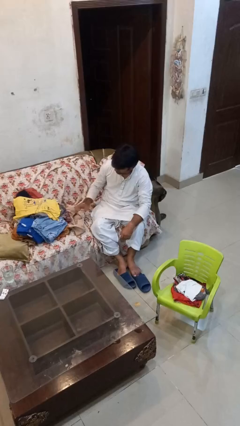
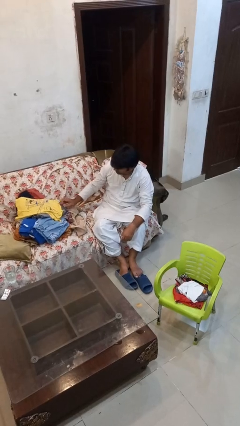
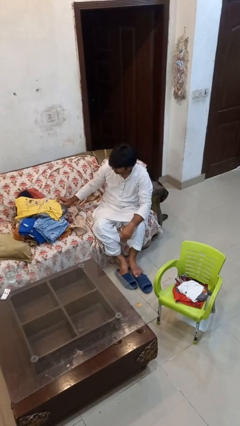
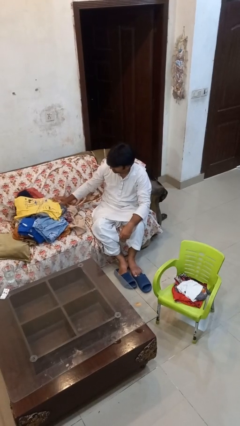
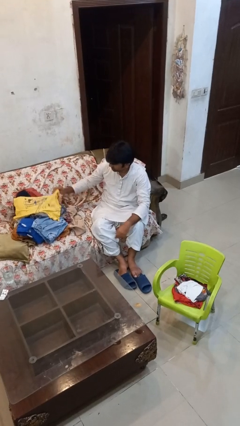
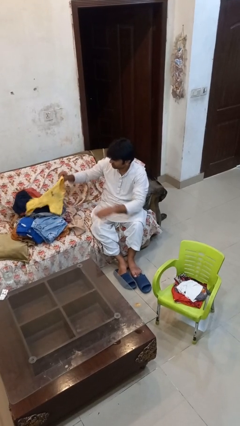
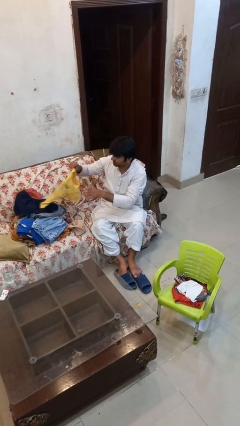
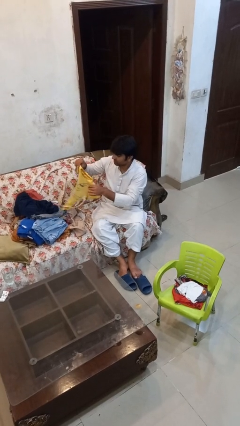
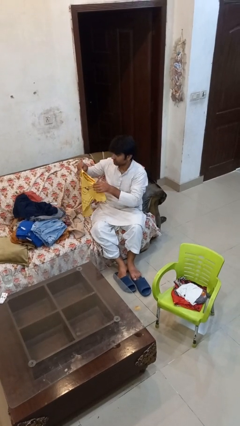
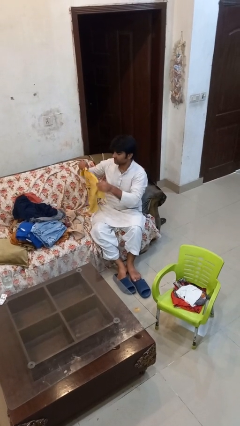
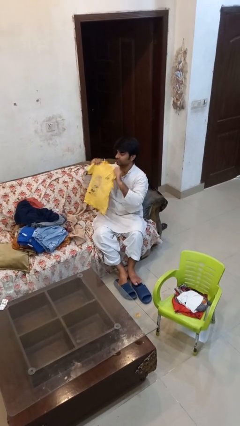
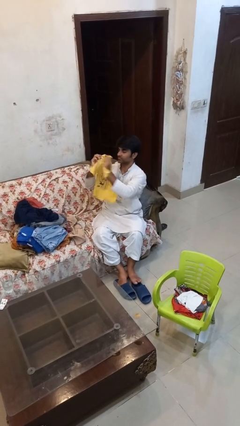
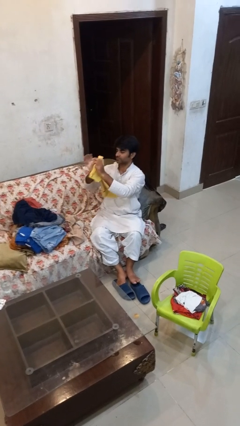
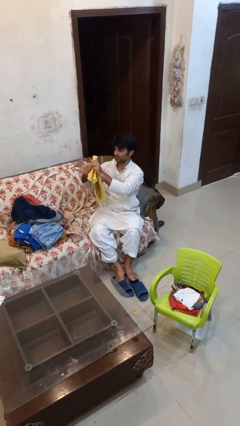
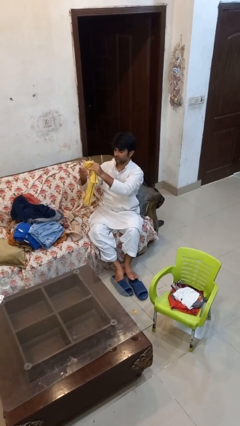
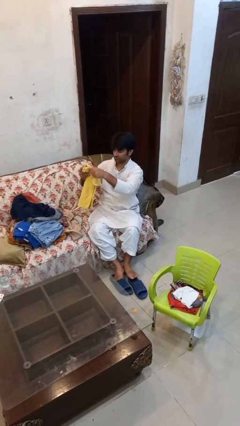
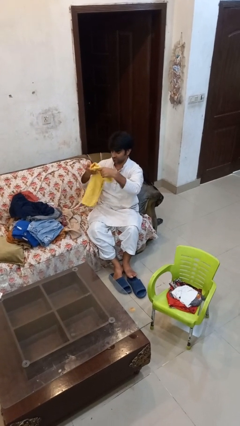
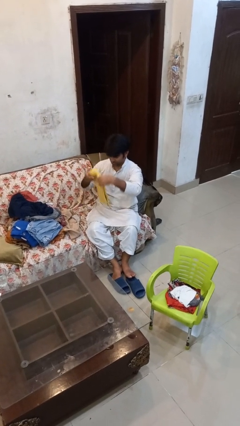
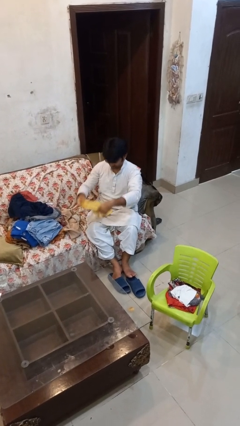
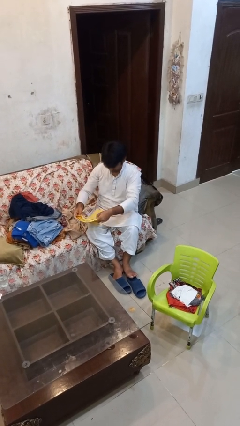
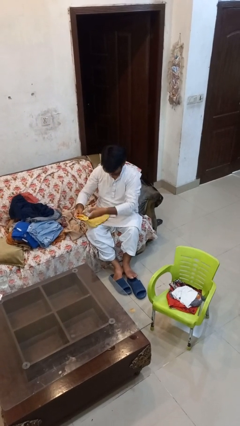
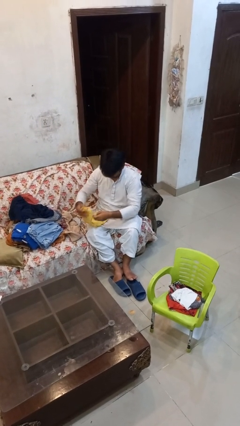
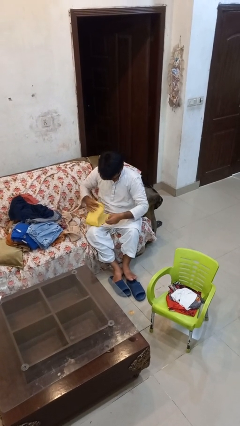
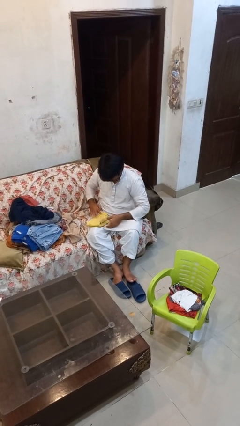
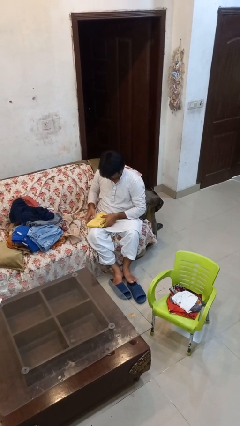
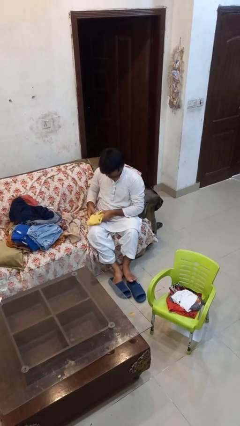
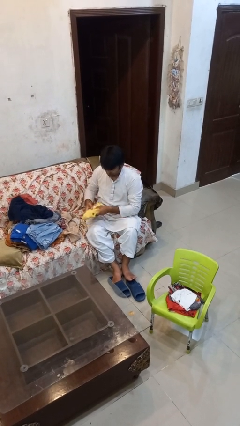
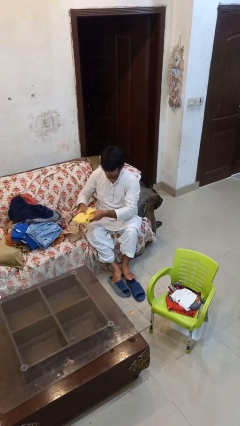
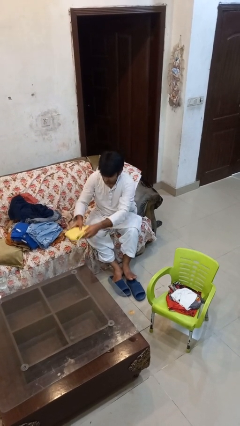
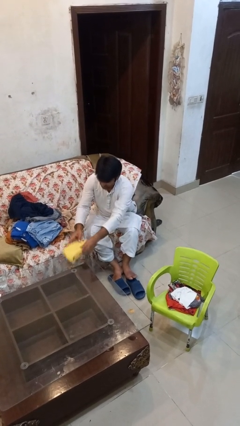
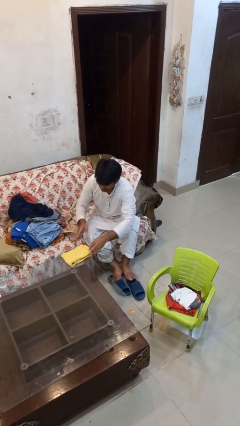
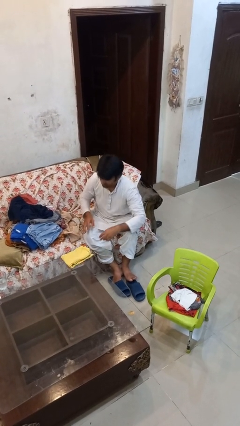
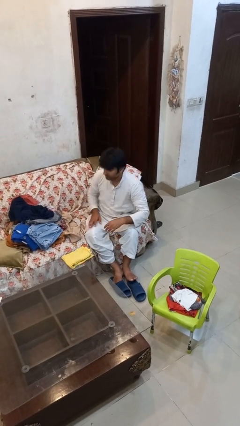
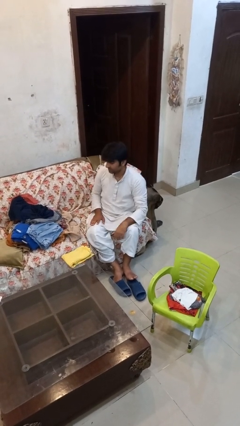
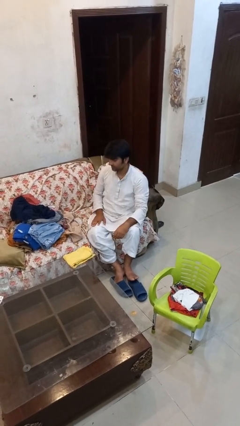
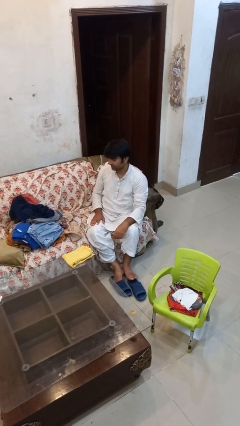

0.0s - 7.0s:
person folds shirt

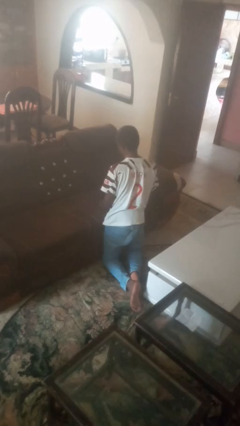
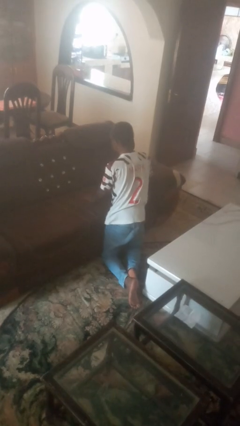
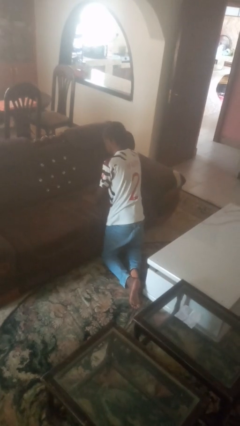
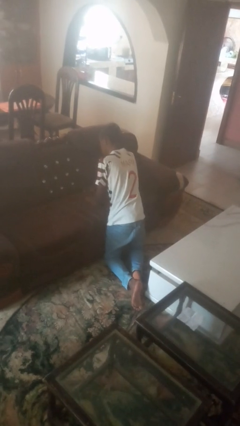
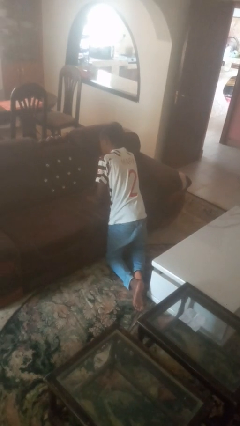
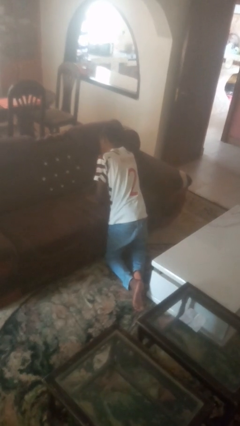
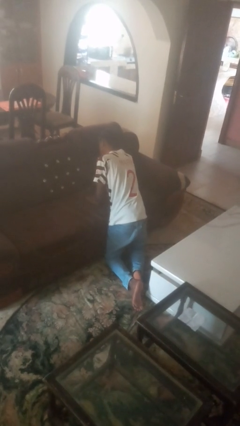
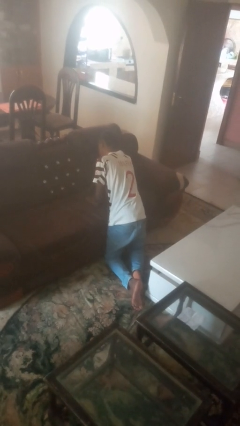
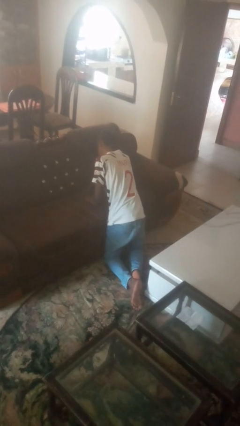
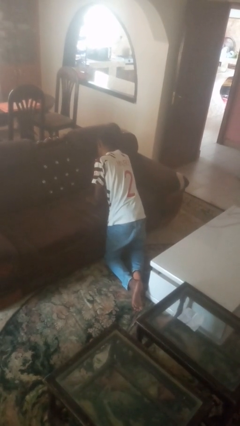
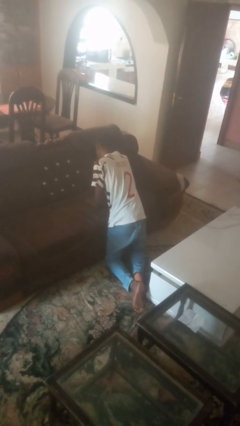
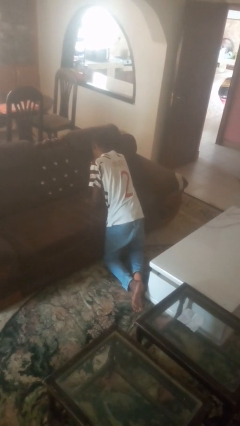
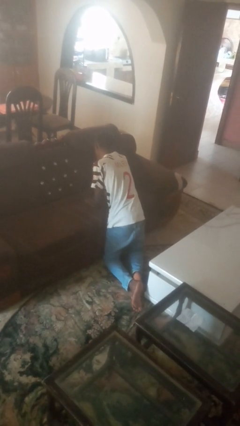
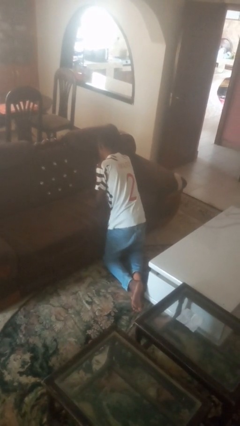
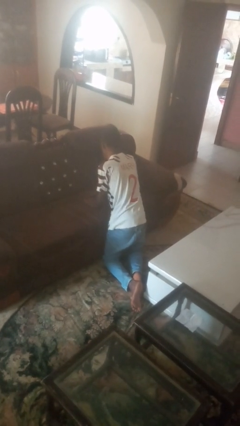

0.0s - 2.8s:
person searches in couch

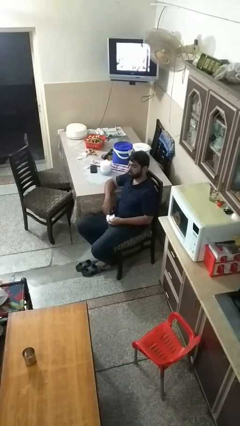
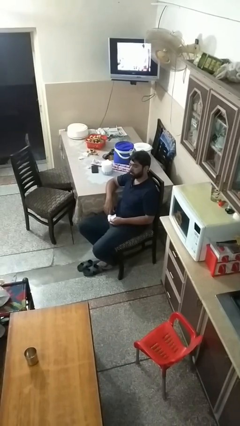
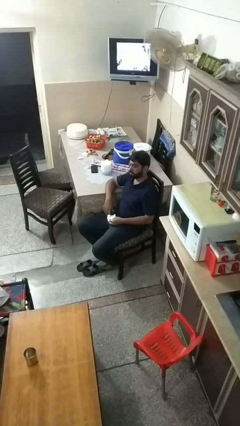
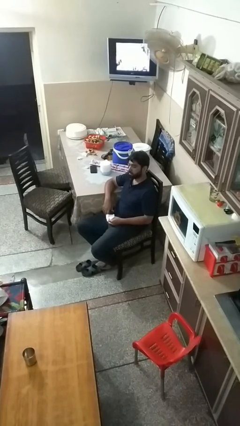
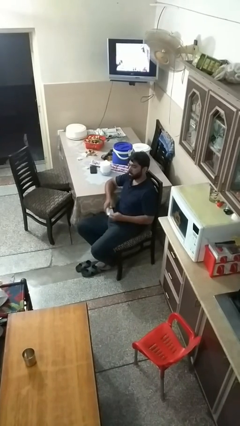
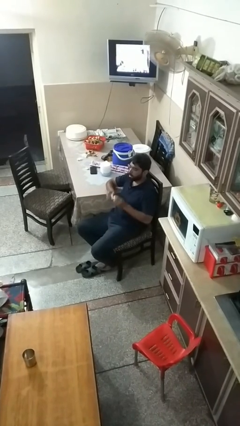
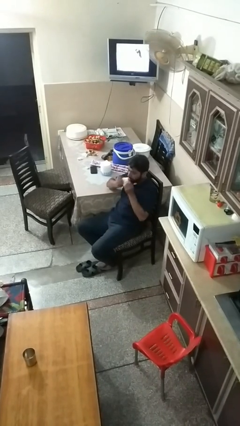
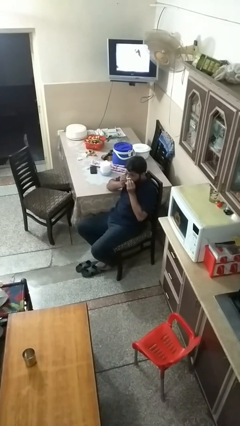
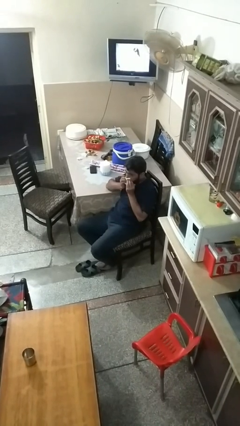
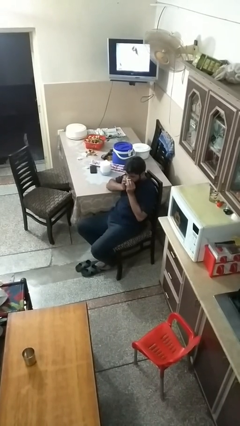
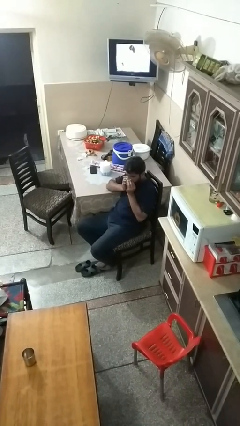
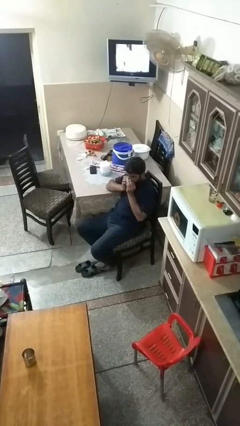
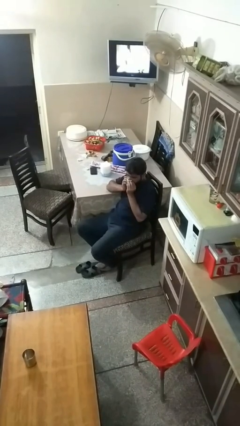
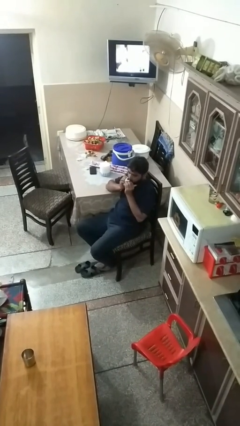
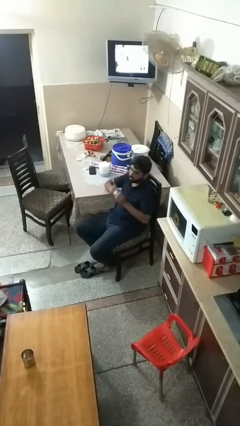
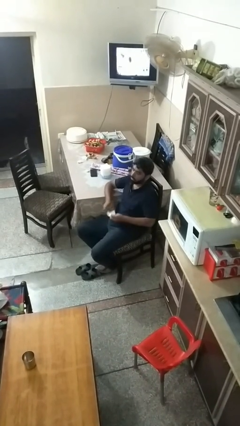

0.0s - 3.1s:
person blows nose

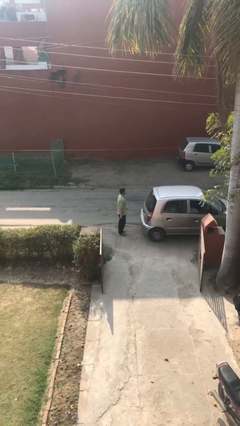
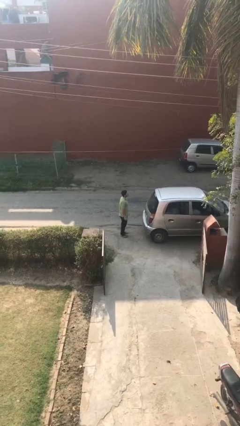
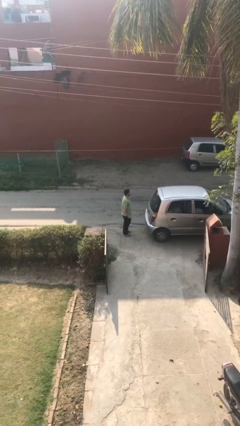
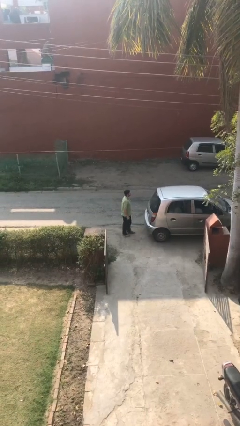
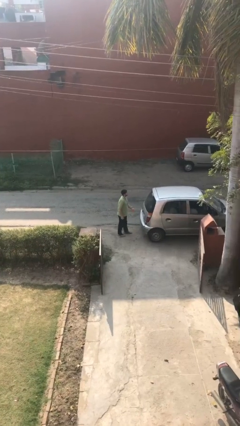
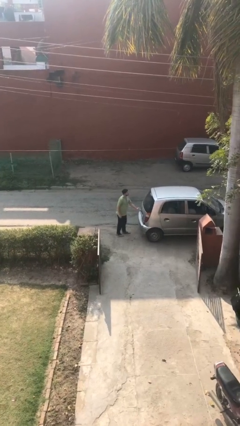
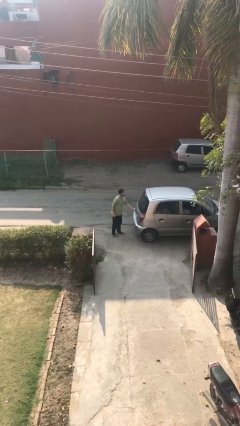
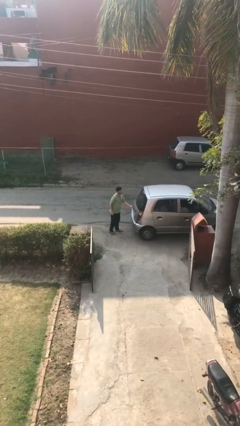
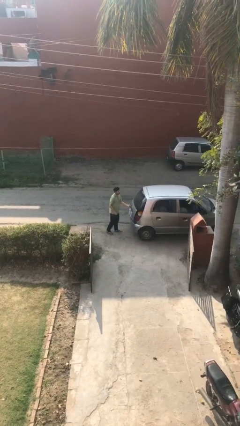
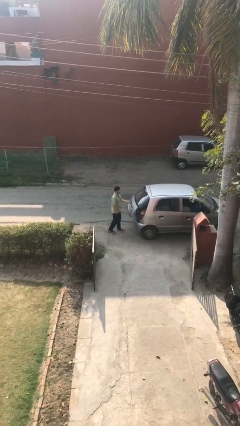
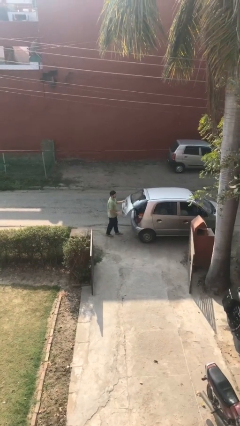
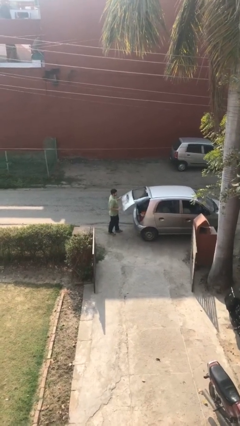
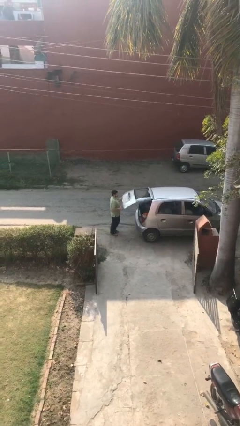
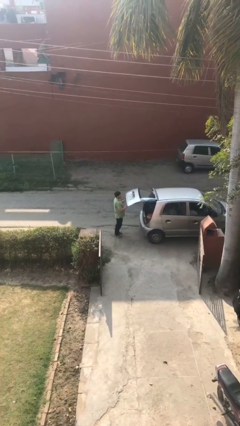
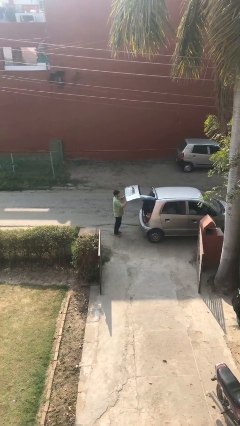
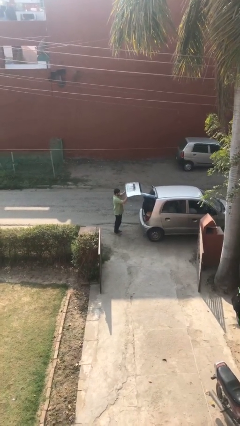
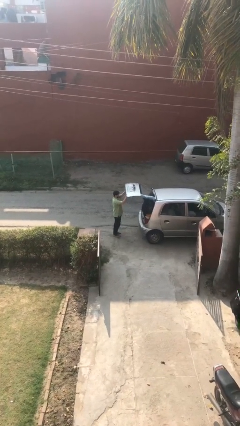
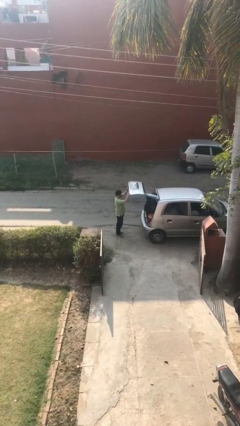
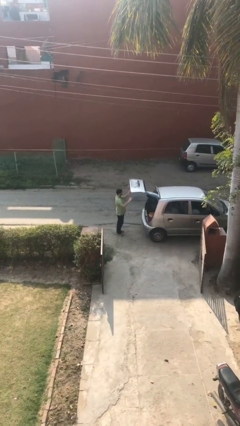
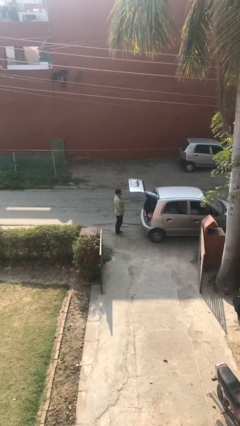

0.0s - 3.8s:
person opens car trunk

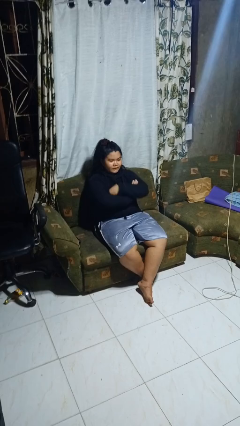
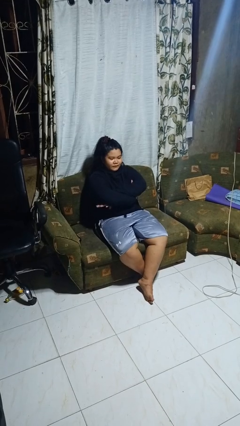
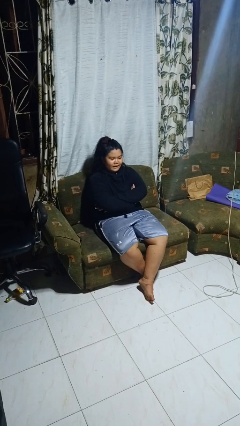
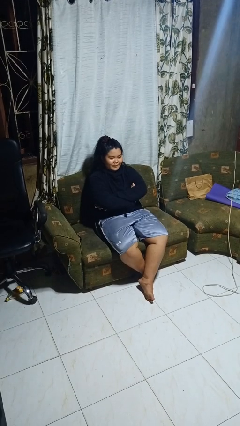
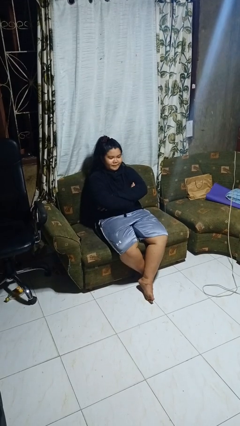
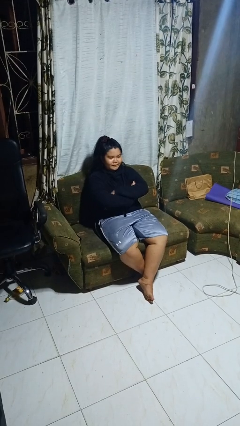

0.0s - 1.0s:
person crosses arms
